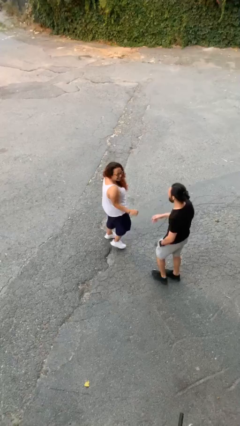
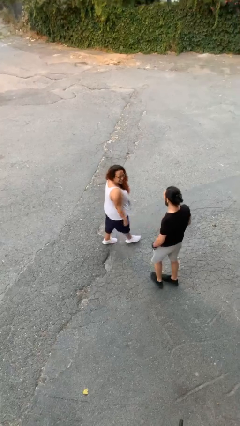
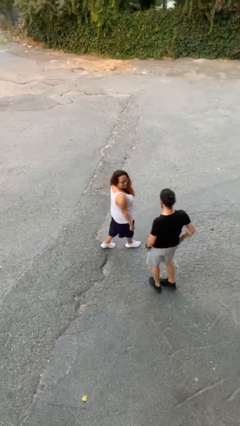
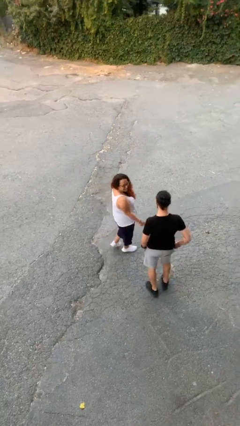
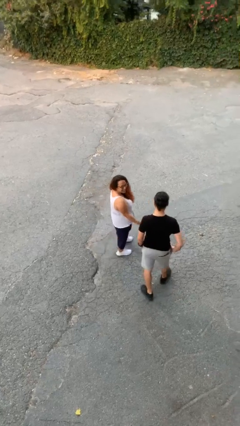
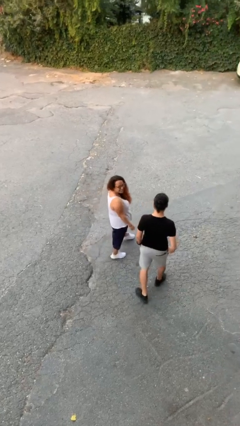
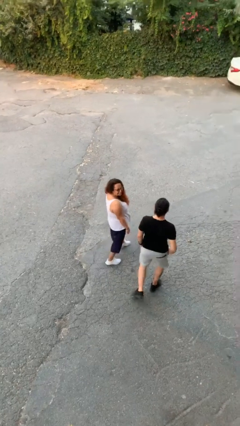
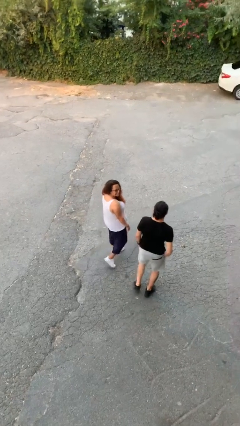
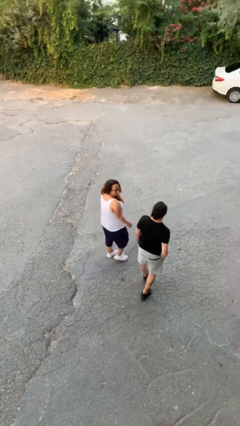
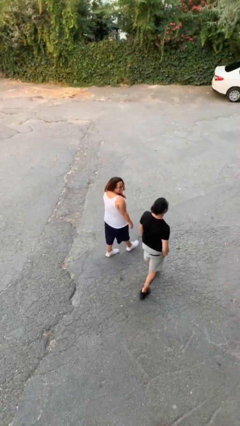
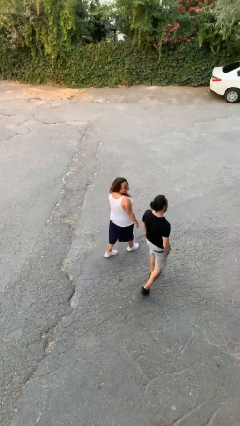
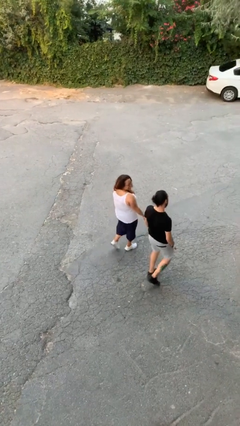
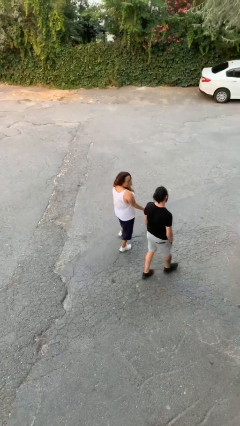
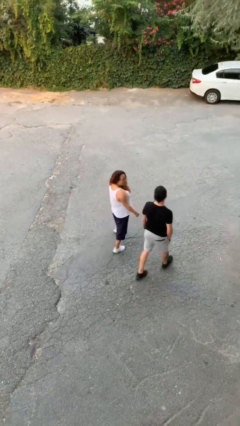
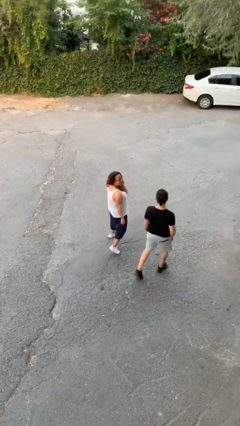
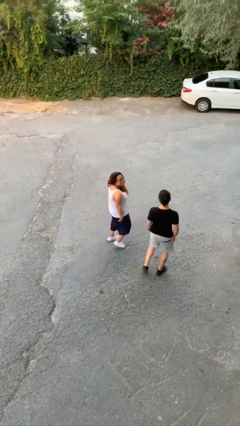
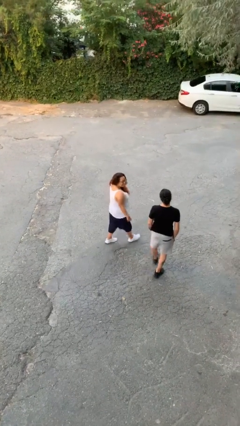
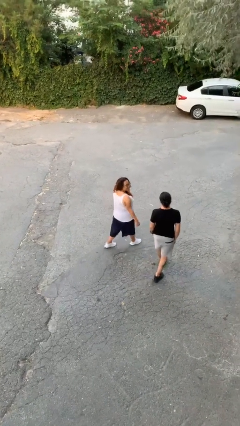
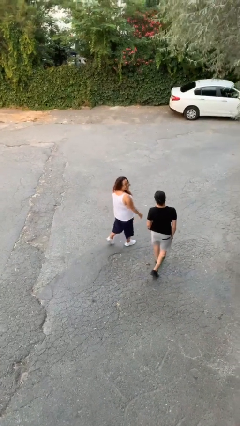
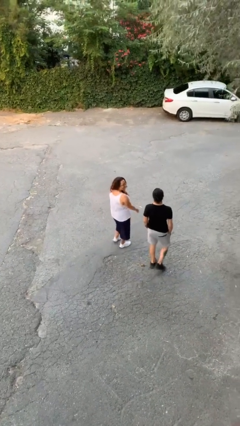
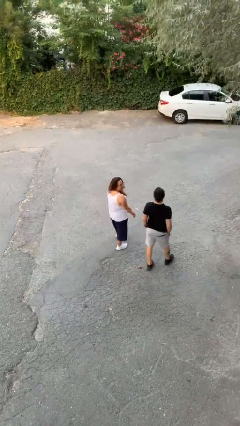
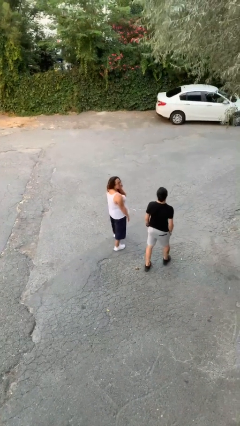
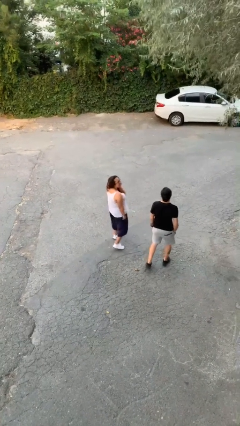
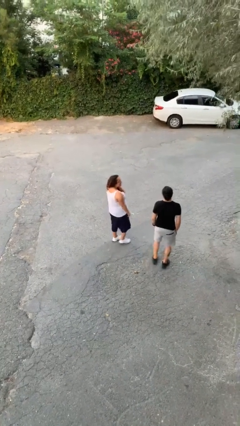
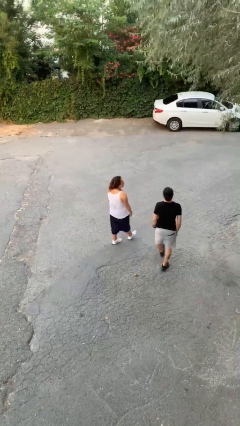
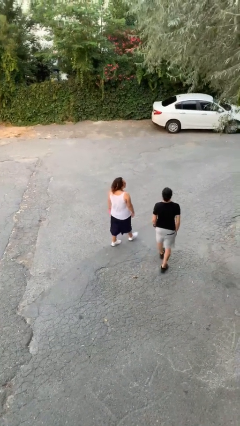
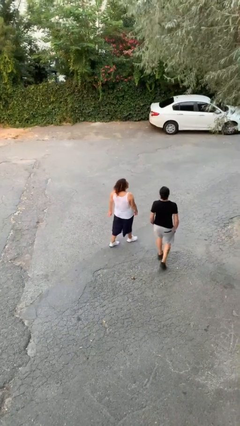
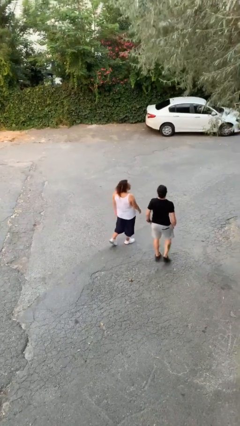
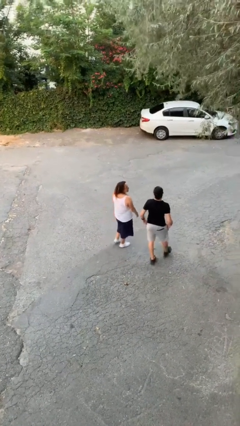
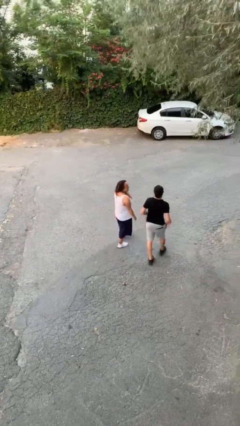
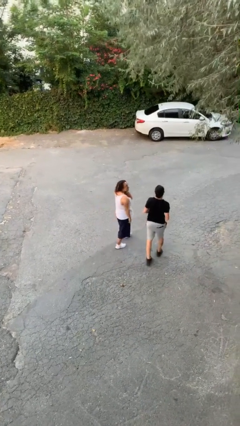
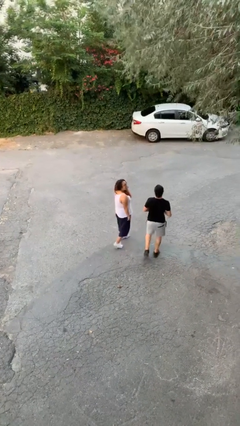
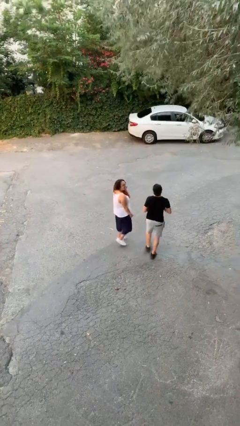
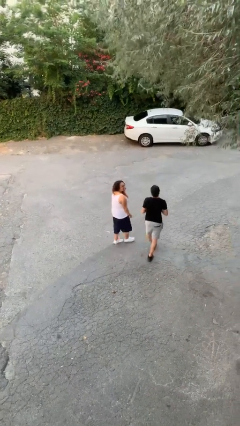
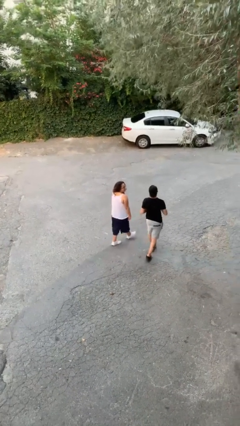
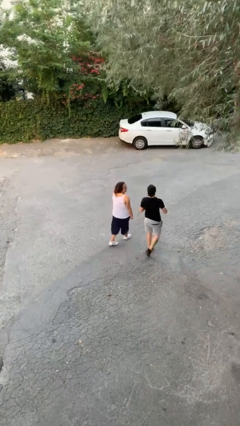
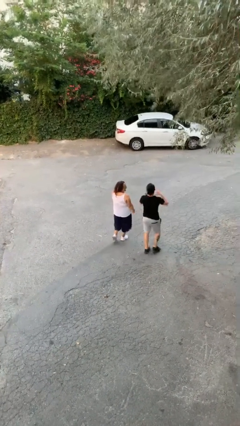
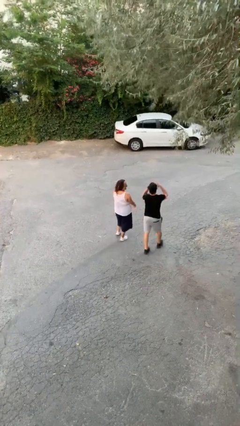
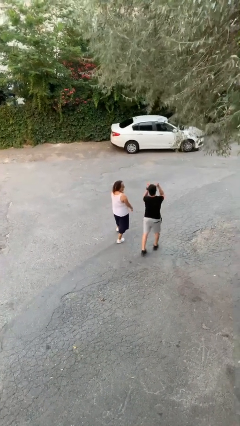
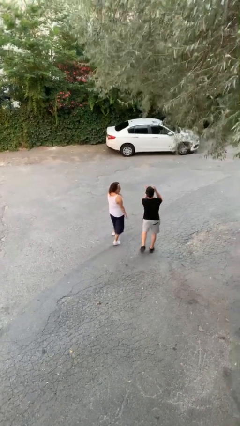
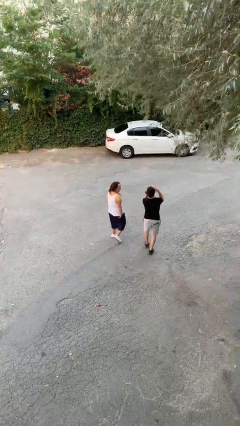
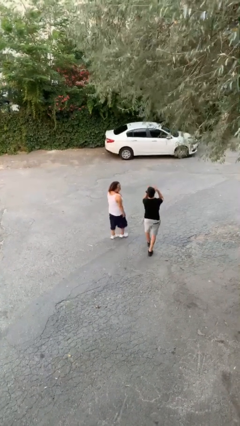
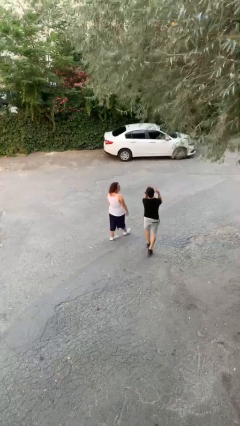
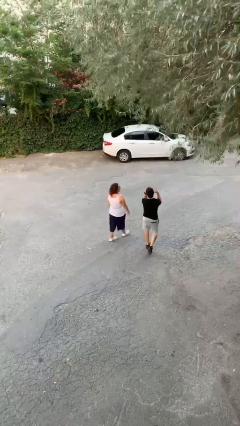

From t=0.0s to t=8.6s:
person talks to person

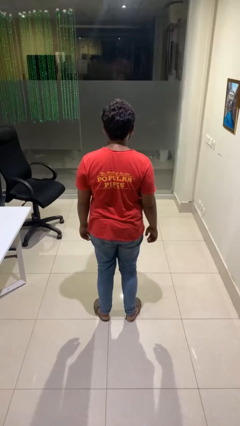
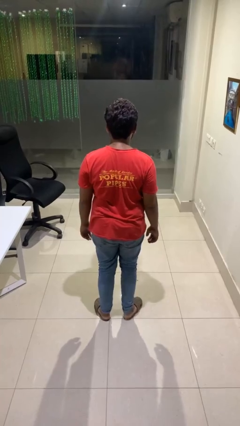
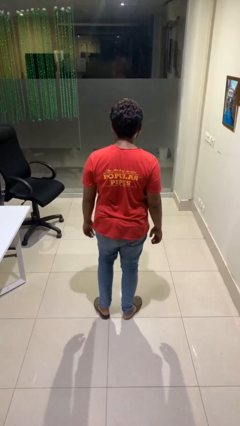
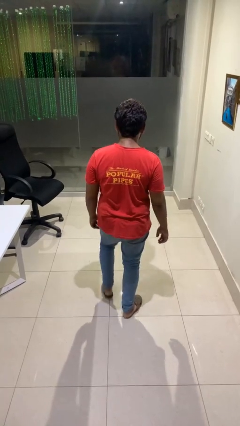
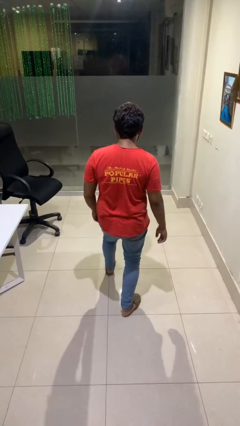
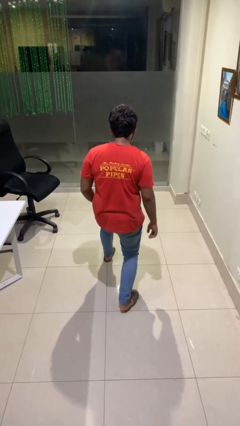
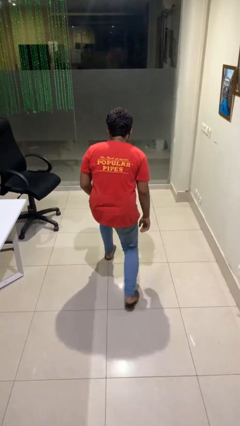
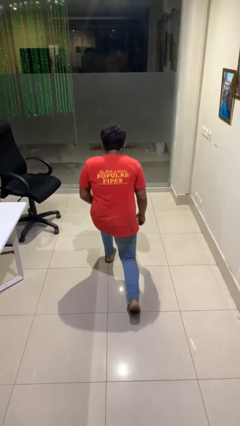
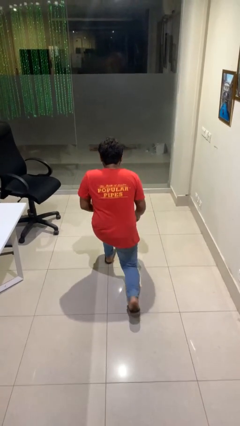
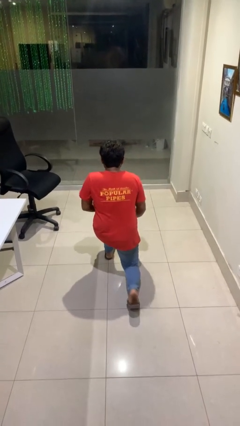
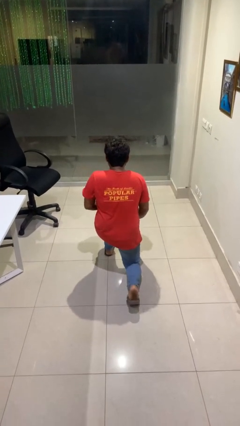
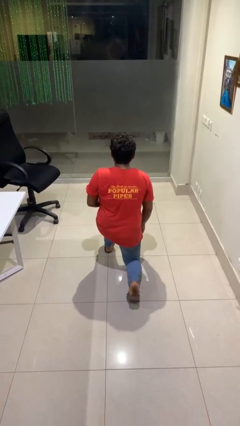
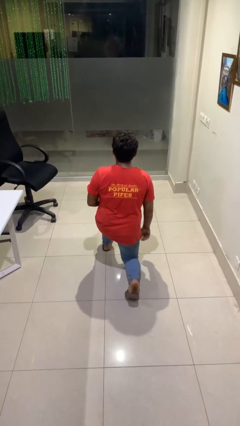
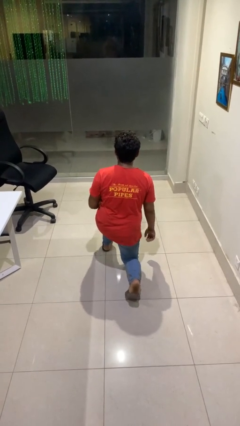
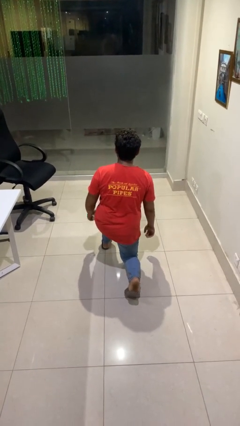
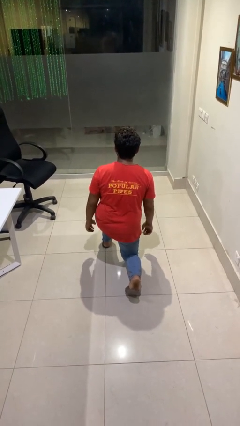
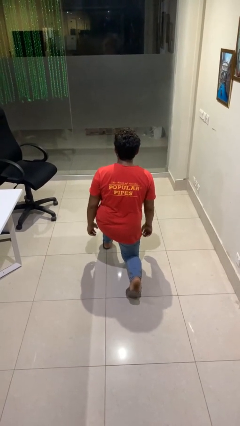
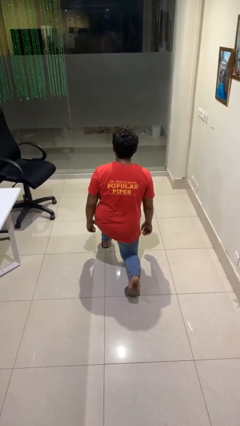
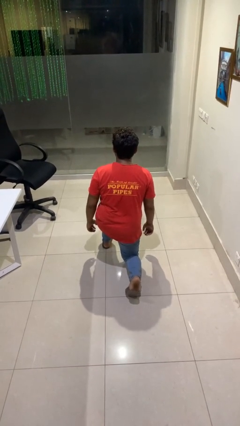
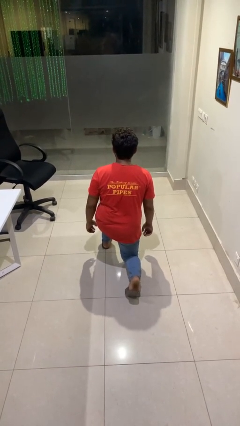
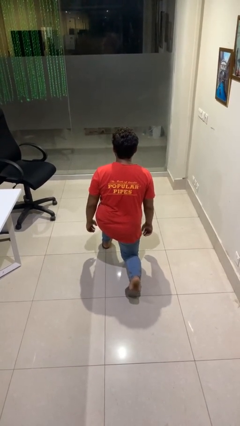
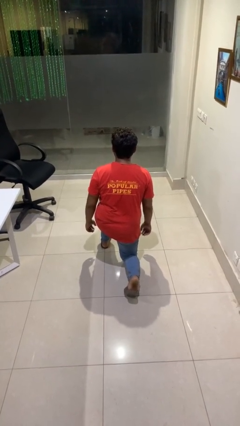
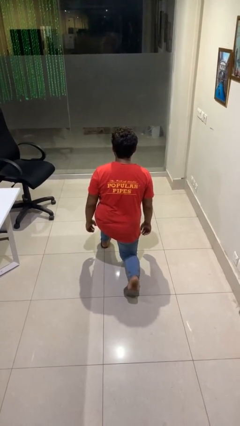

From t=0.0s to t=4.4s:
person kneels

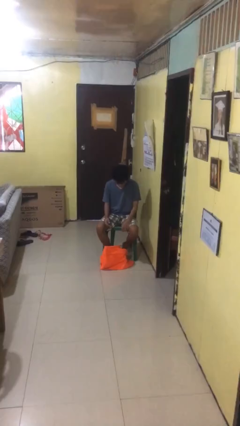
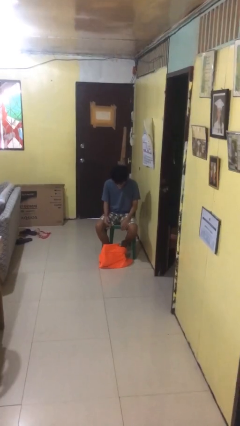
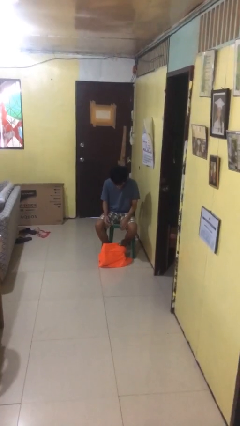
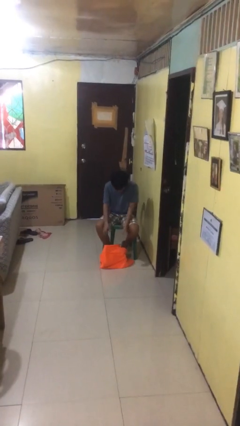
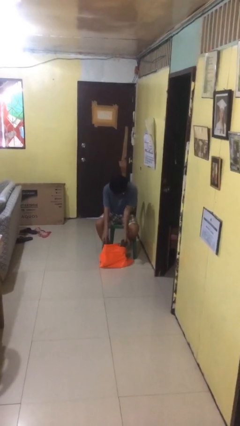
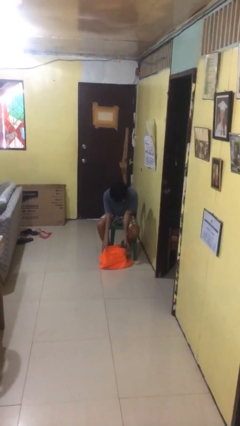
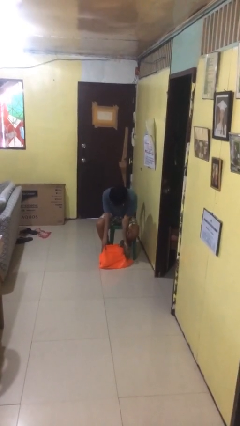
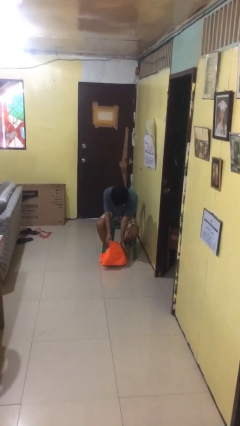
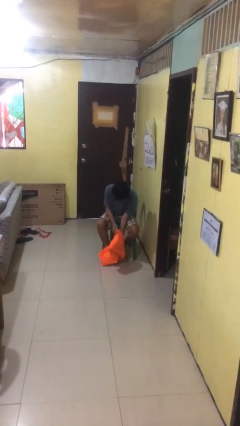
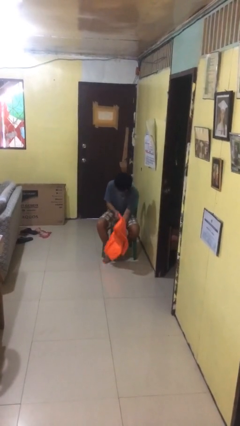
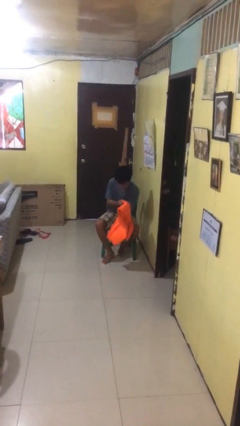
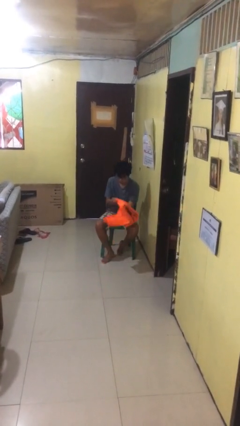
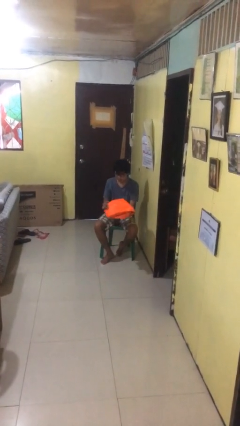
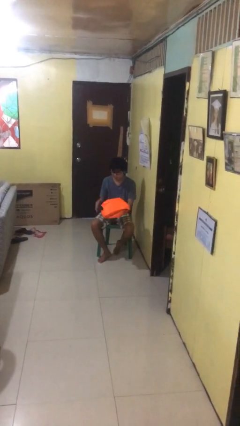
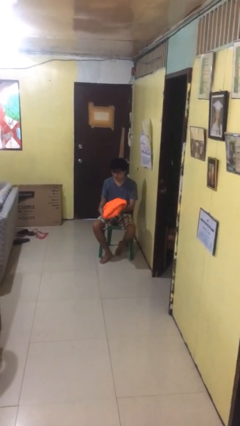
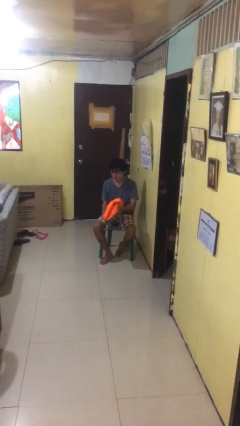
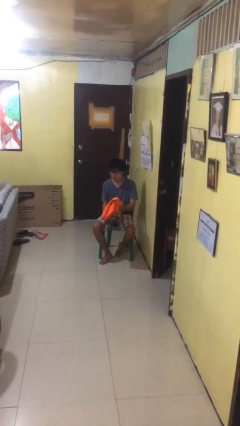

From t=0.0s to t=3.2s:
person picks up object from floor

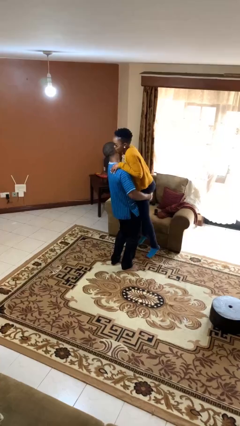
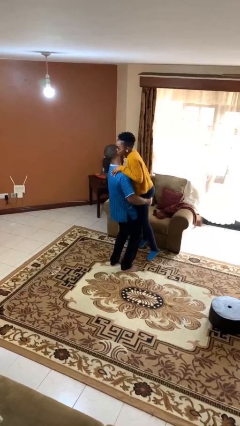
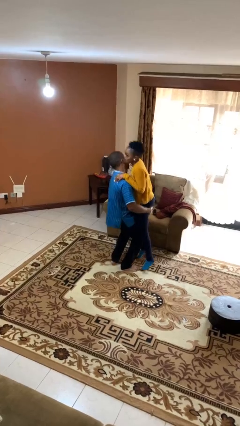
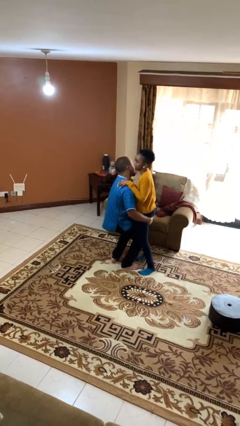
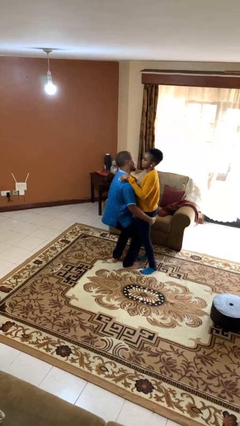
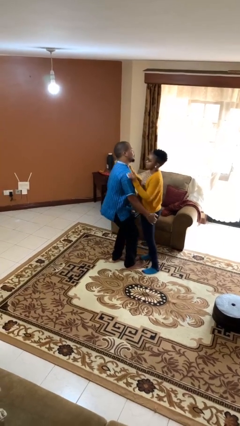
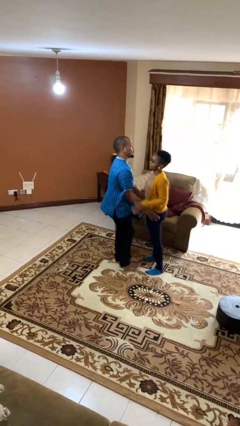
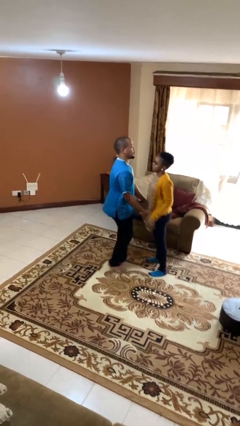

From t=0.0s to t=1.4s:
person puts down person
